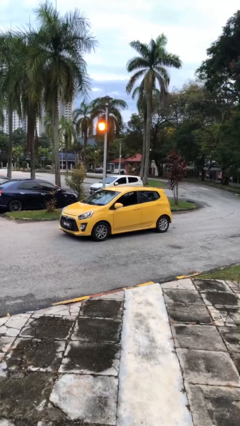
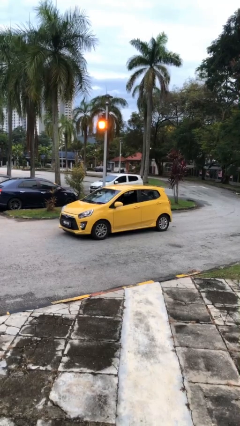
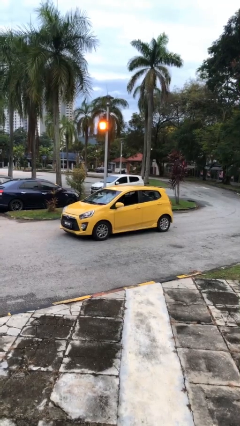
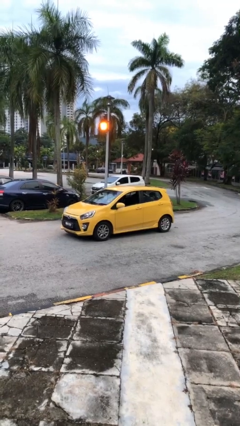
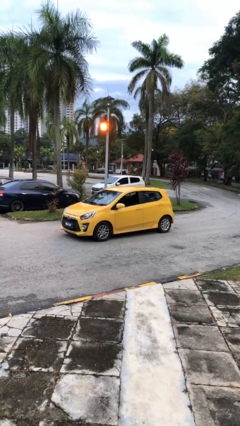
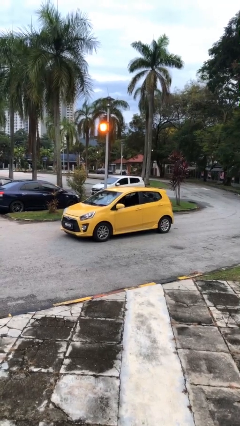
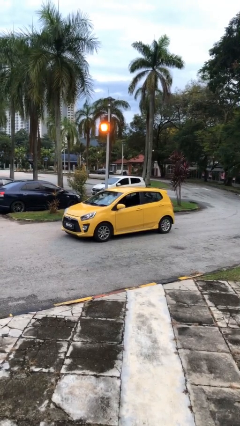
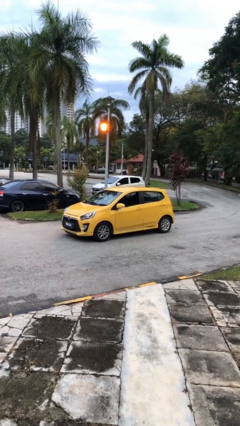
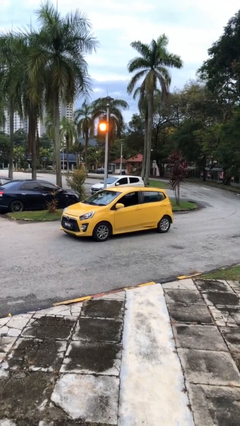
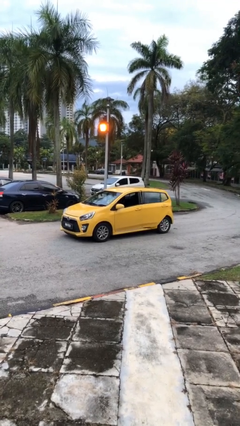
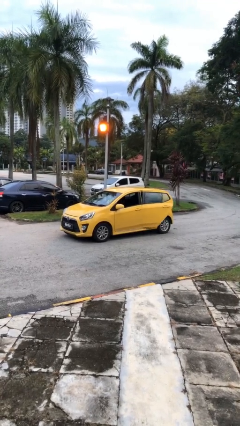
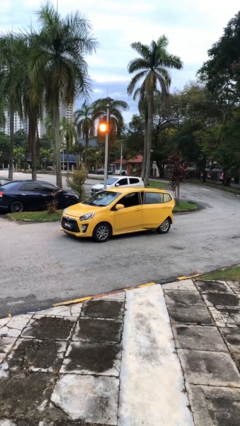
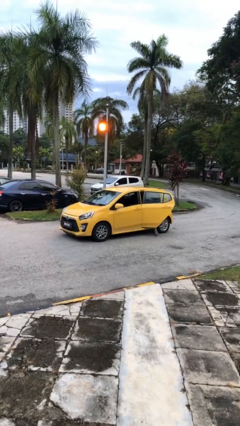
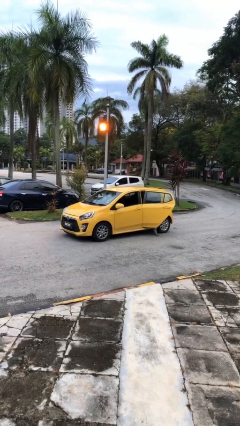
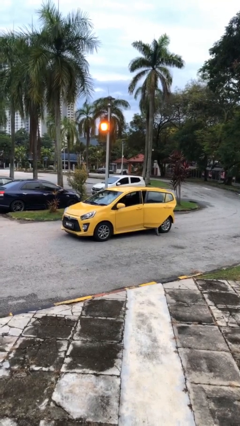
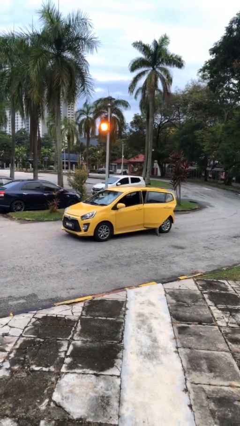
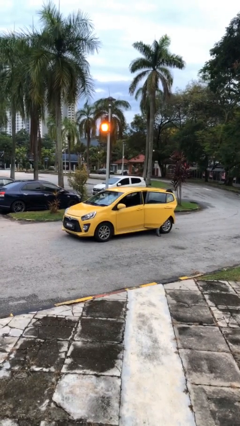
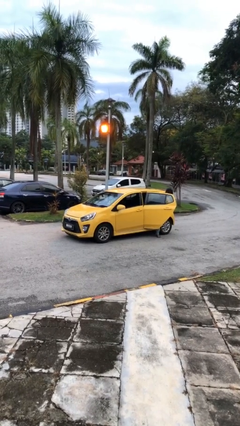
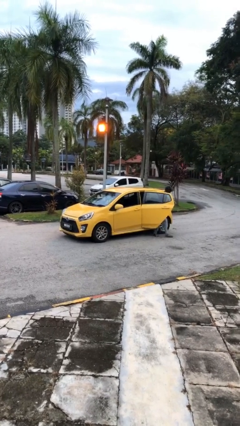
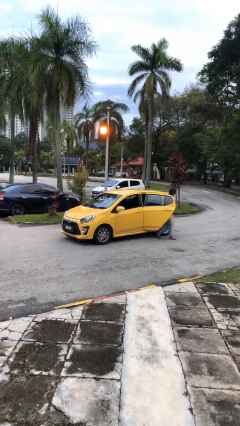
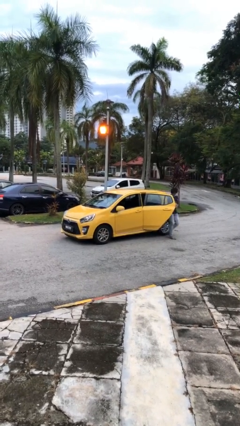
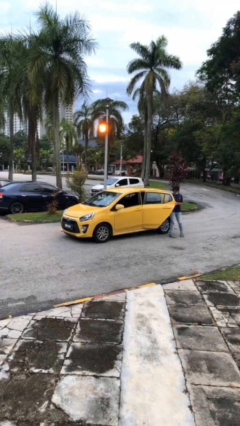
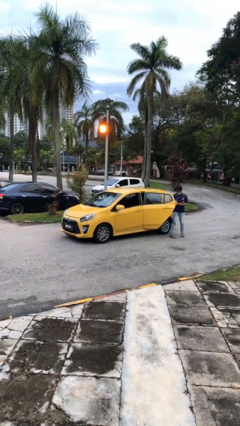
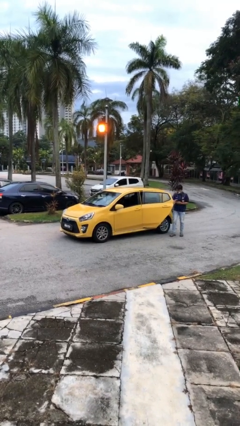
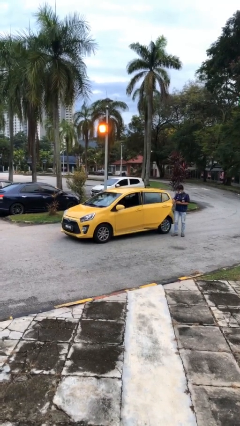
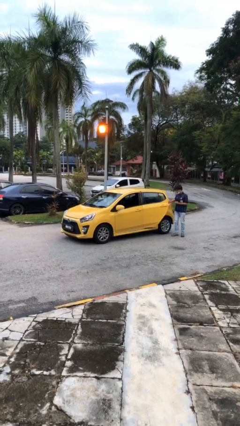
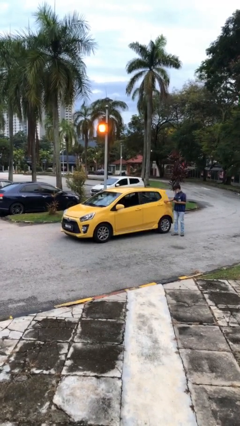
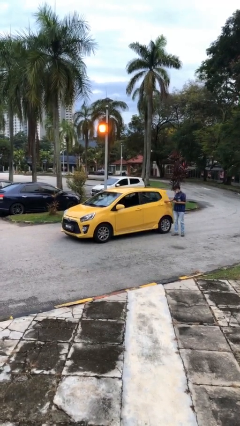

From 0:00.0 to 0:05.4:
car drops off person

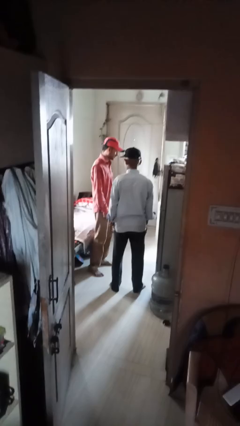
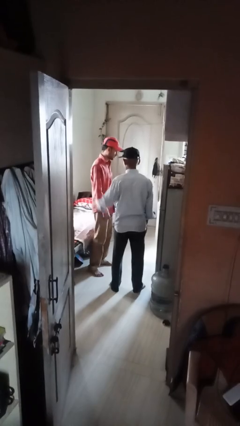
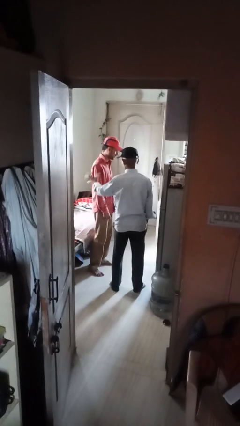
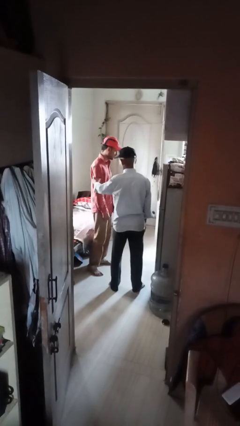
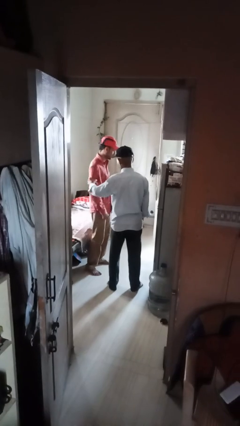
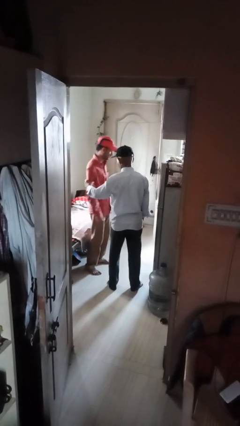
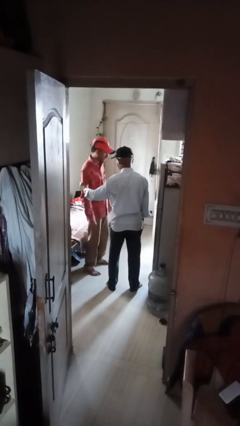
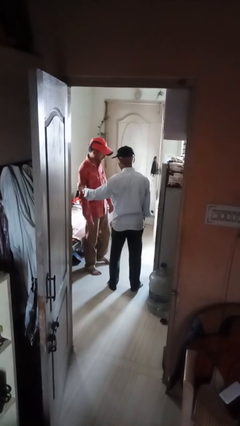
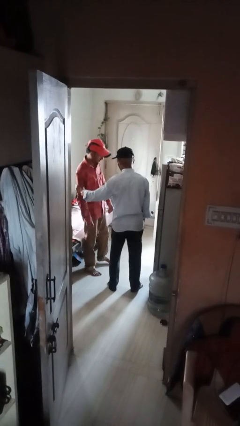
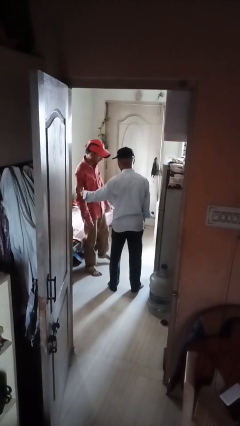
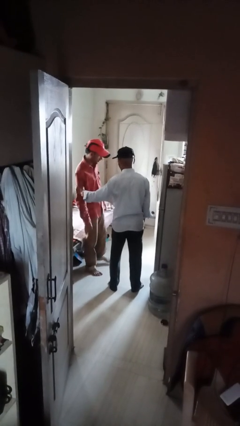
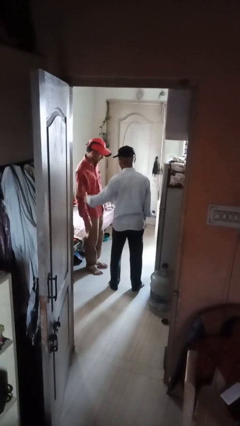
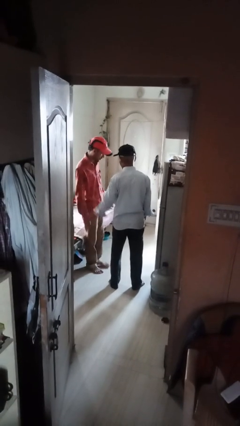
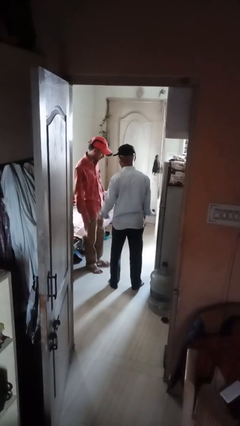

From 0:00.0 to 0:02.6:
person grabs person by bicep

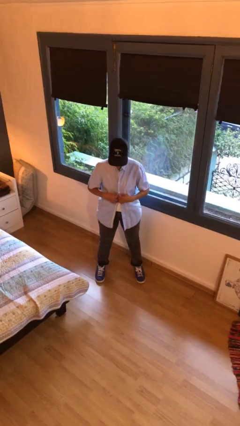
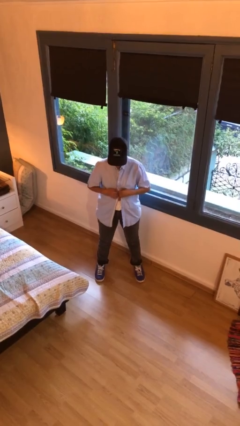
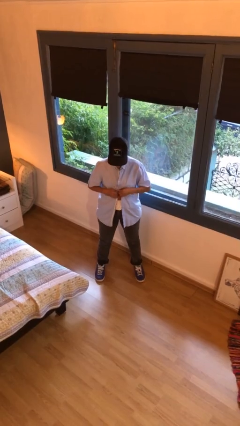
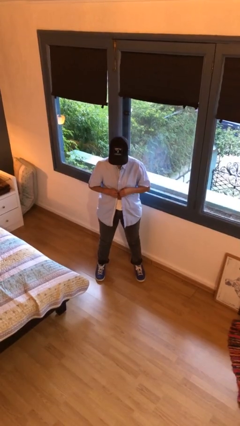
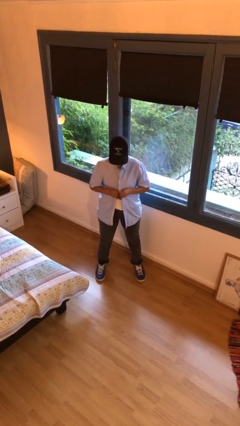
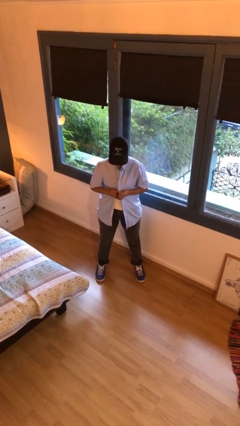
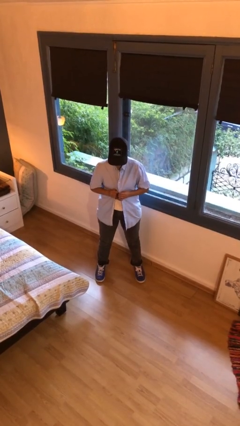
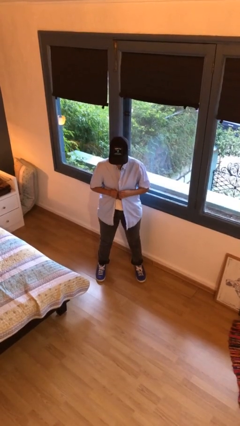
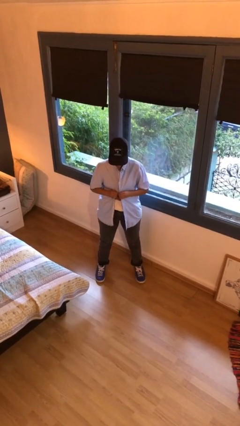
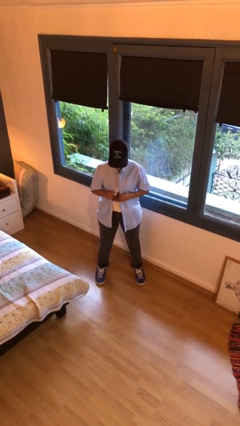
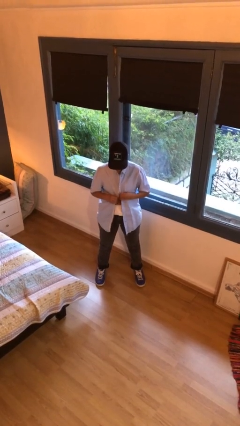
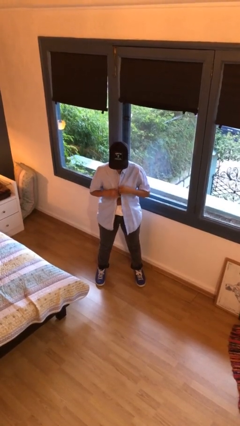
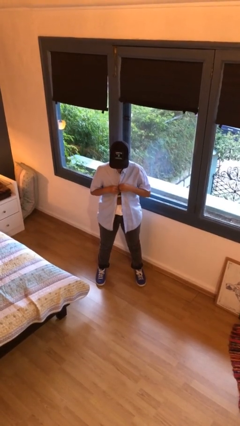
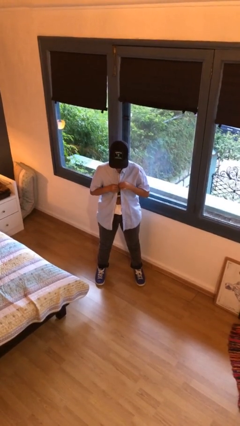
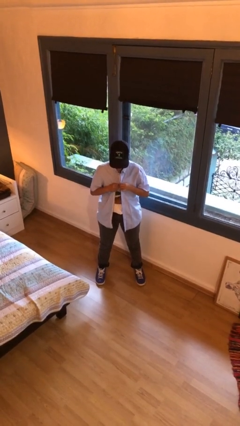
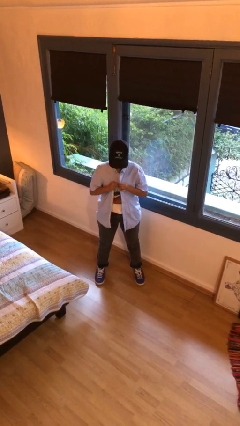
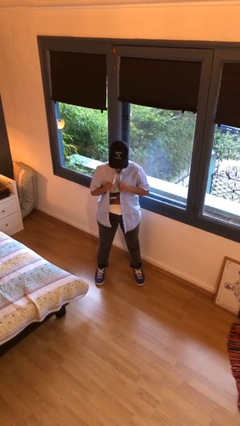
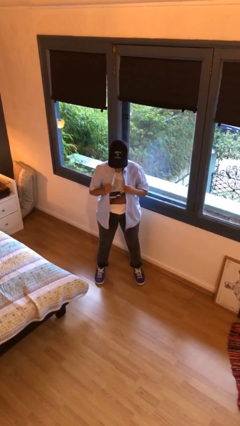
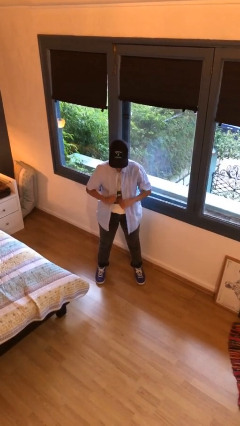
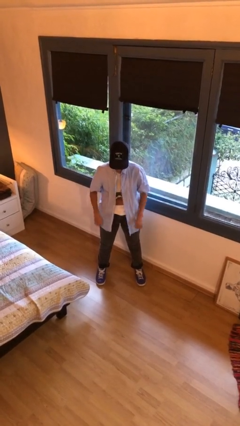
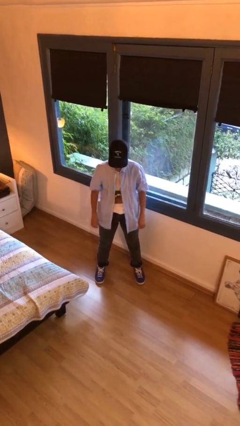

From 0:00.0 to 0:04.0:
person unbuttons shirt

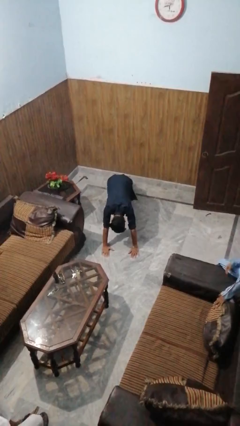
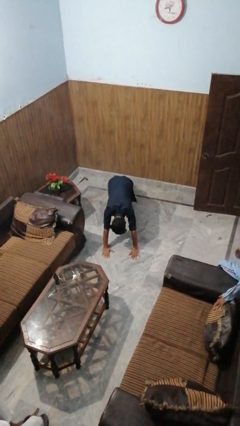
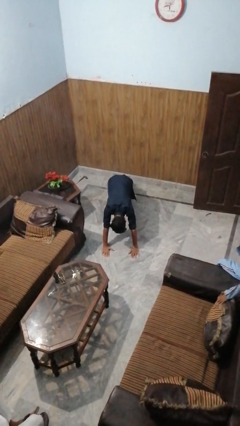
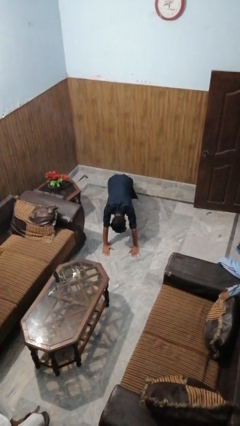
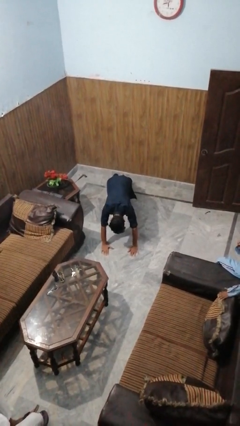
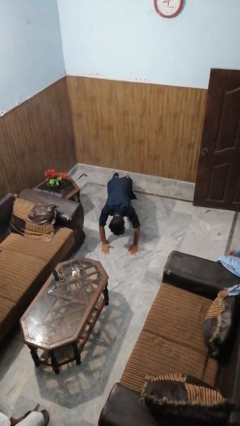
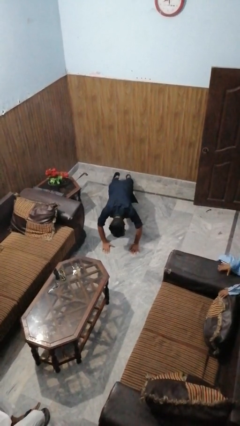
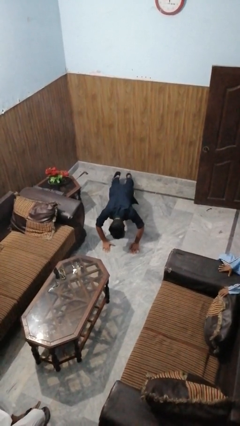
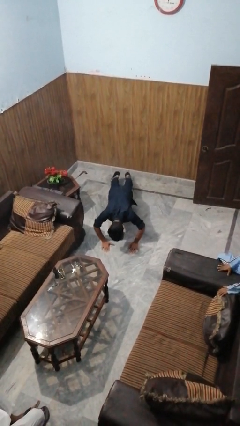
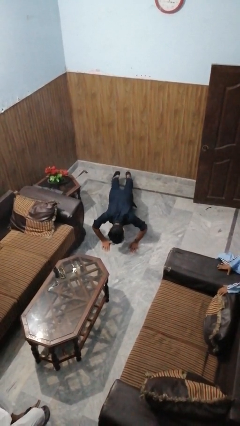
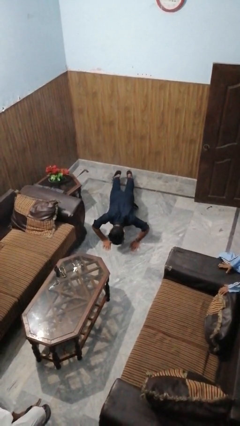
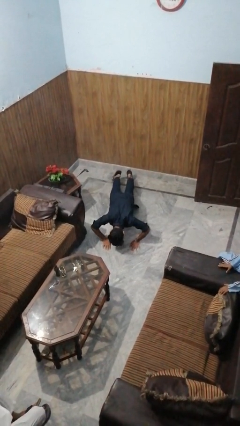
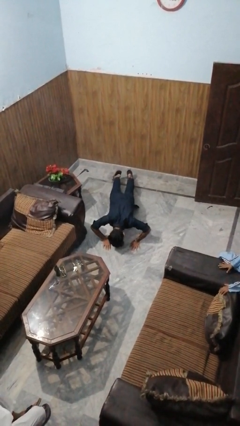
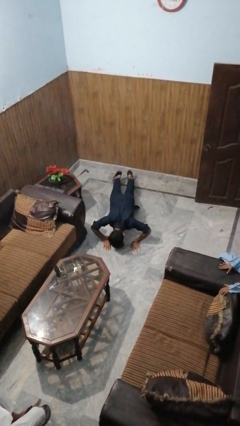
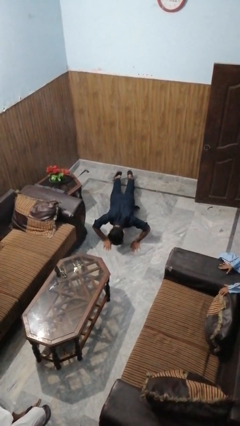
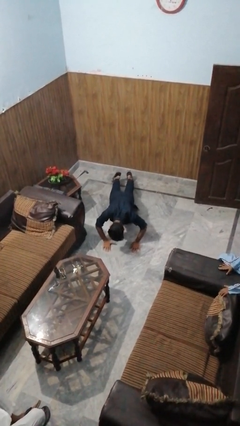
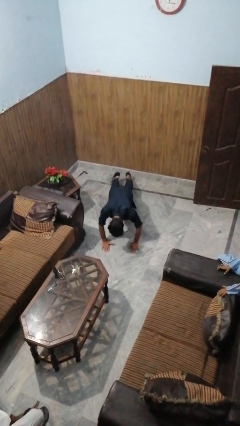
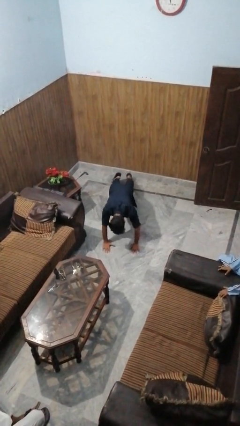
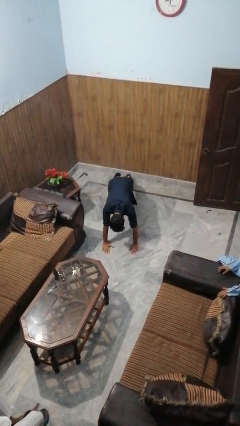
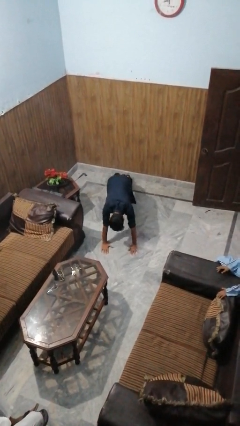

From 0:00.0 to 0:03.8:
person exercises with pushup

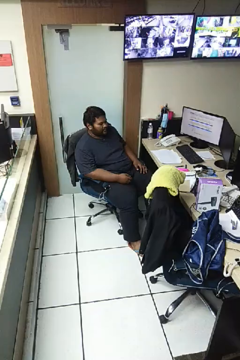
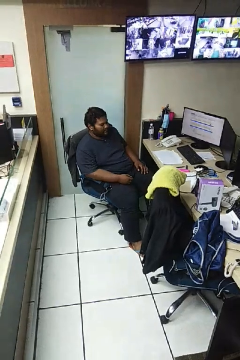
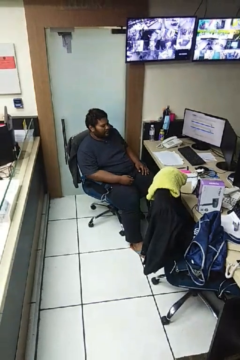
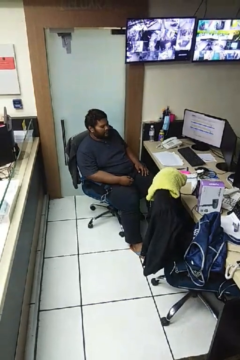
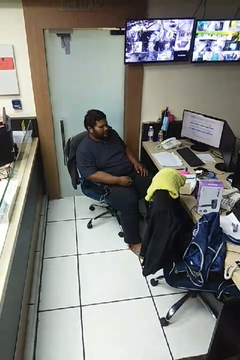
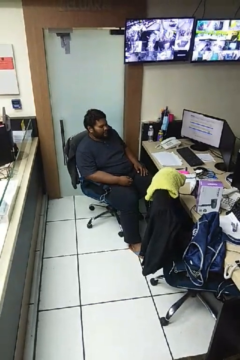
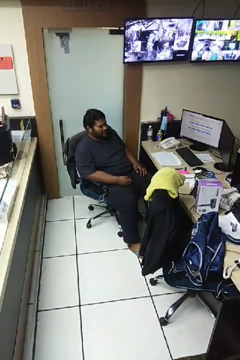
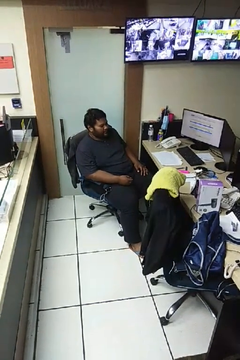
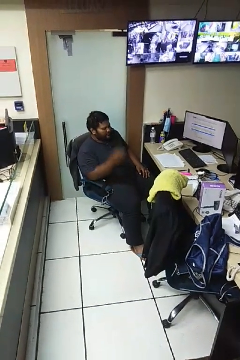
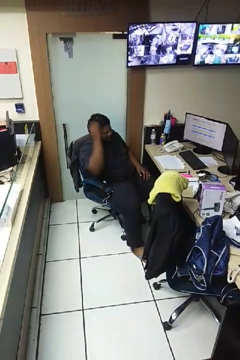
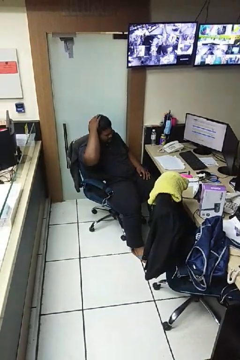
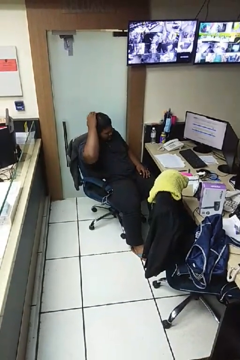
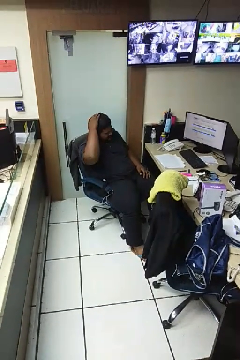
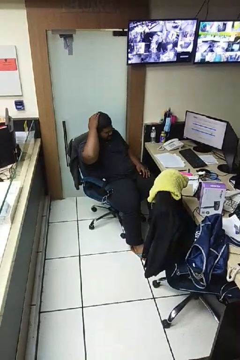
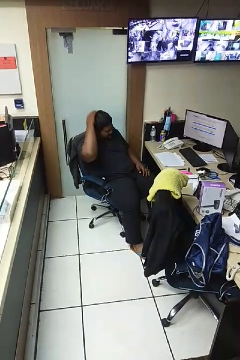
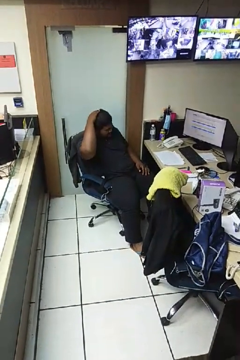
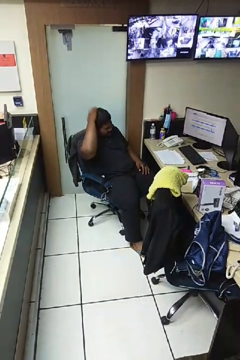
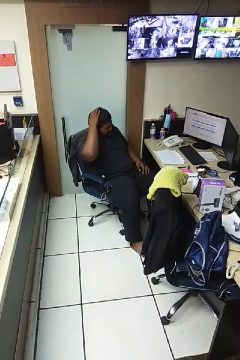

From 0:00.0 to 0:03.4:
person pats head
